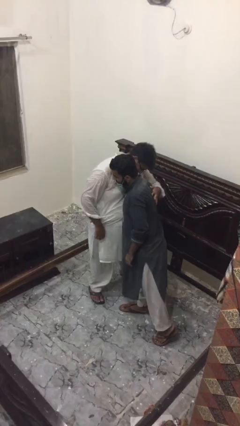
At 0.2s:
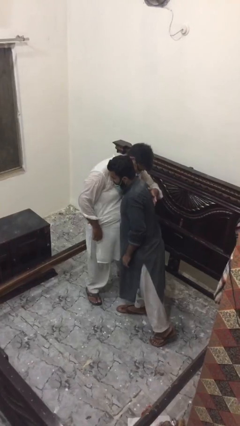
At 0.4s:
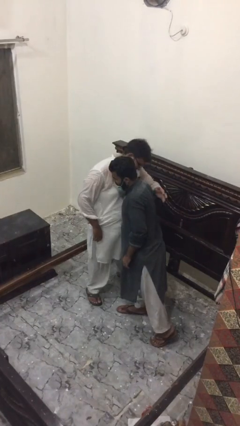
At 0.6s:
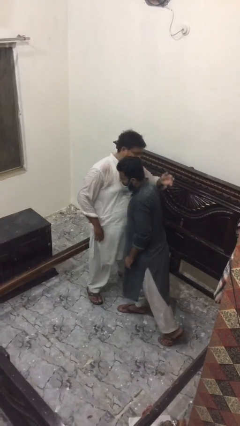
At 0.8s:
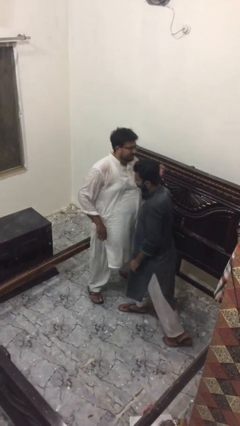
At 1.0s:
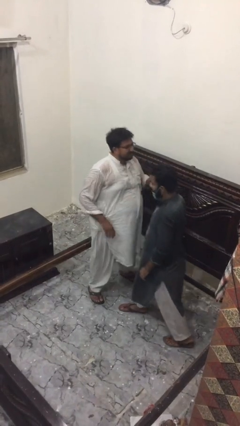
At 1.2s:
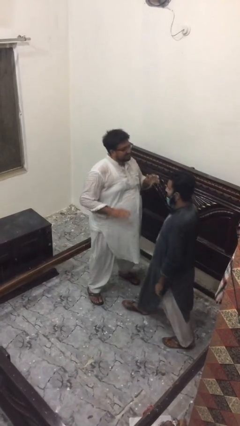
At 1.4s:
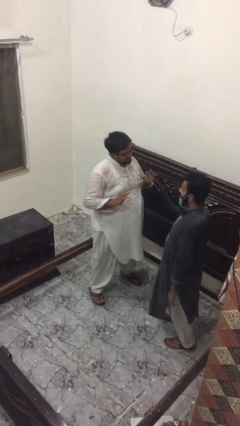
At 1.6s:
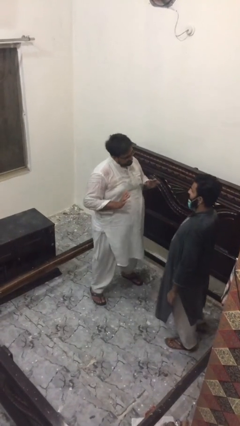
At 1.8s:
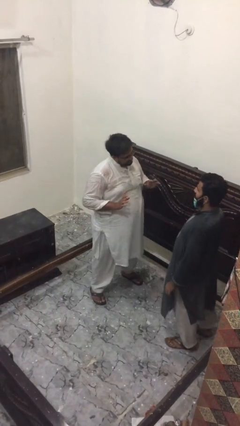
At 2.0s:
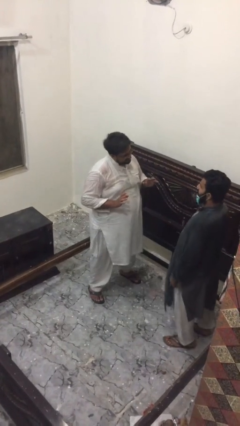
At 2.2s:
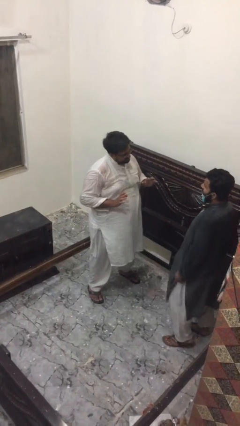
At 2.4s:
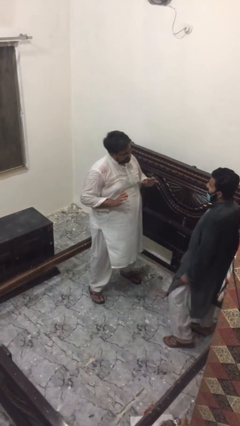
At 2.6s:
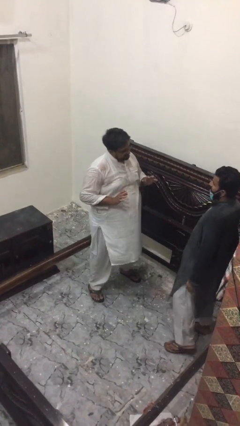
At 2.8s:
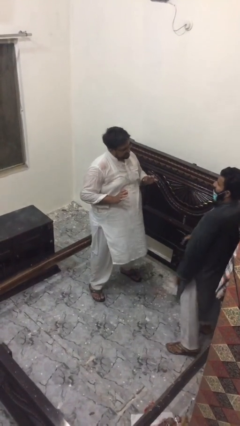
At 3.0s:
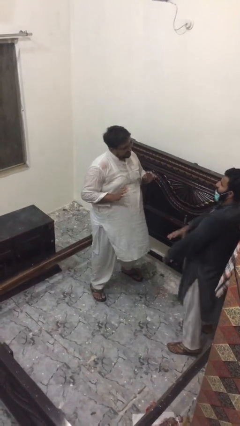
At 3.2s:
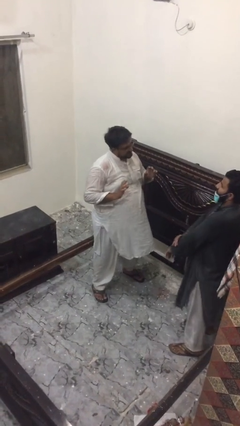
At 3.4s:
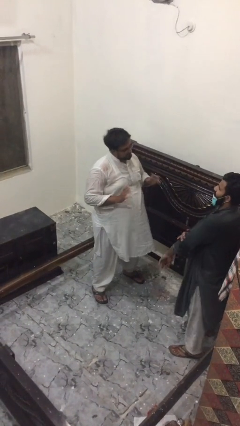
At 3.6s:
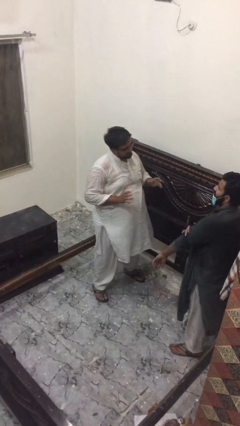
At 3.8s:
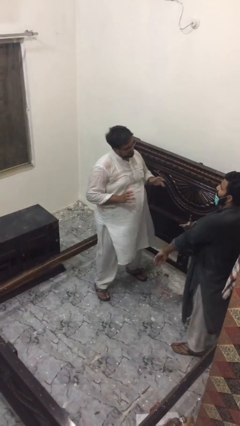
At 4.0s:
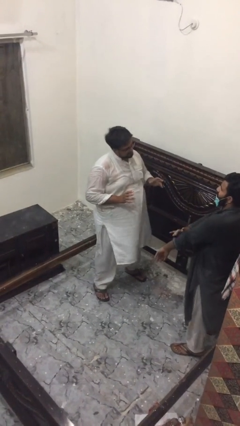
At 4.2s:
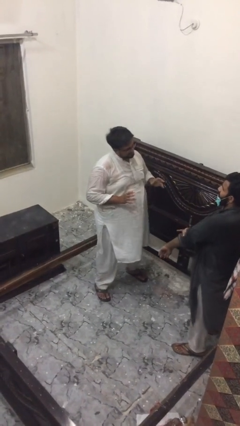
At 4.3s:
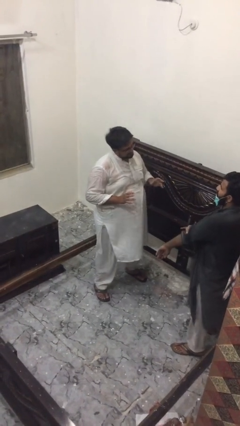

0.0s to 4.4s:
person talks to person

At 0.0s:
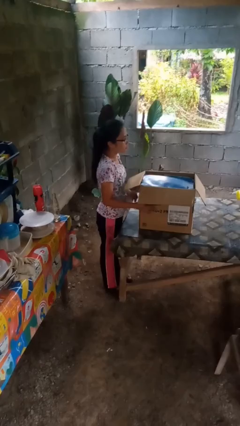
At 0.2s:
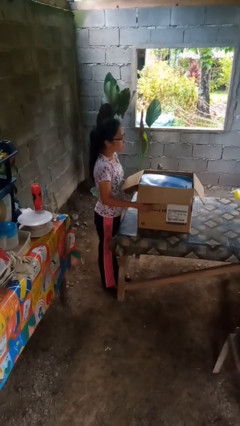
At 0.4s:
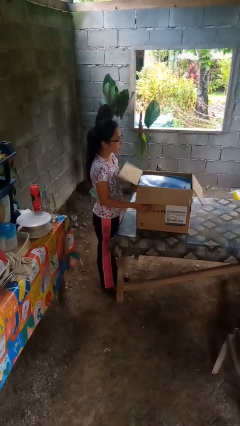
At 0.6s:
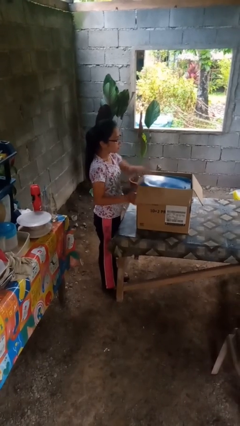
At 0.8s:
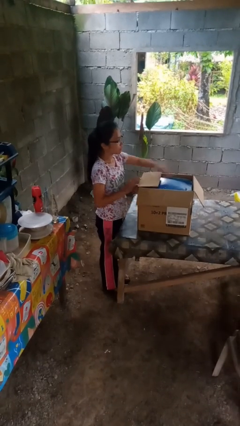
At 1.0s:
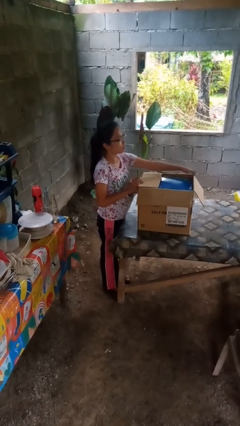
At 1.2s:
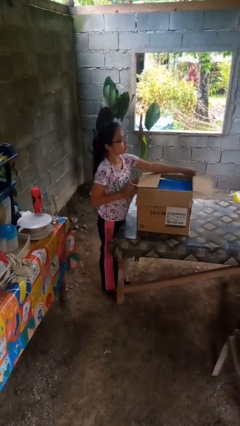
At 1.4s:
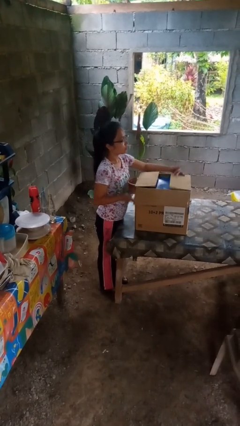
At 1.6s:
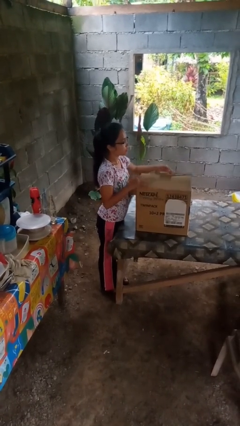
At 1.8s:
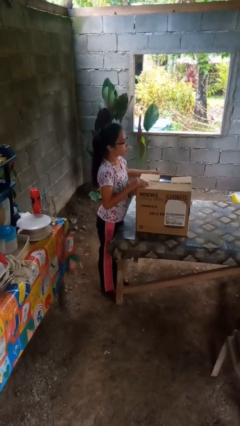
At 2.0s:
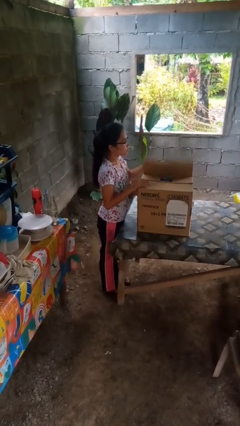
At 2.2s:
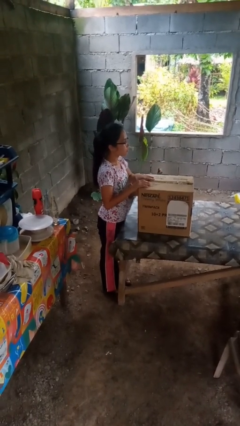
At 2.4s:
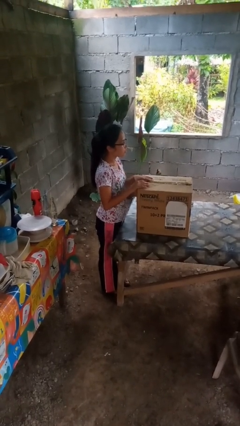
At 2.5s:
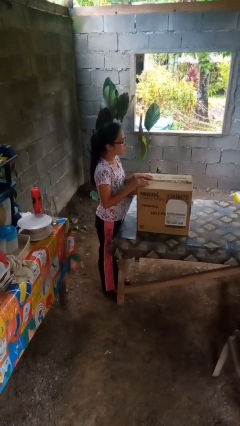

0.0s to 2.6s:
person closes box

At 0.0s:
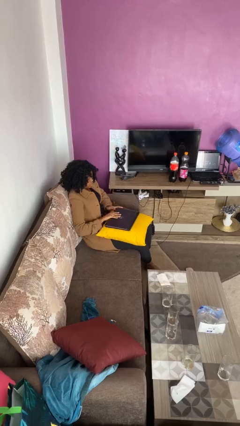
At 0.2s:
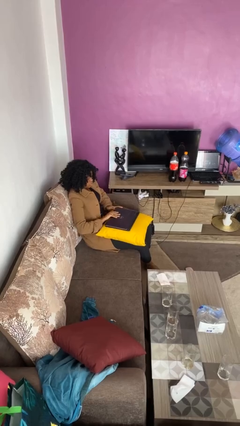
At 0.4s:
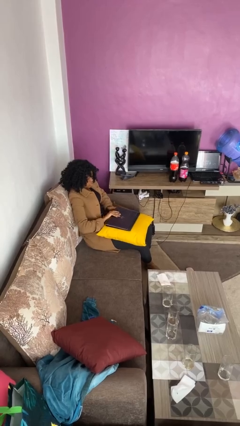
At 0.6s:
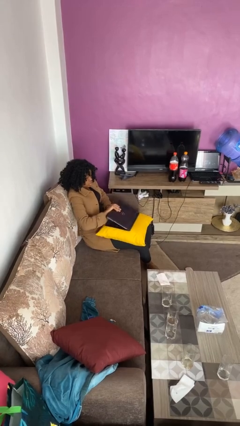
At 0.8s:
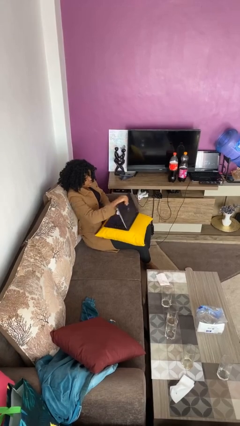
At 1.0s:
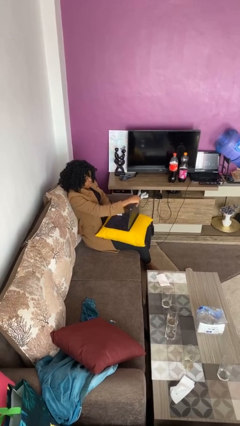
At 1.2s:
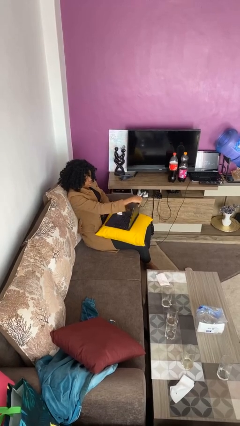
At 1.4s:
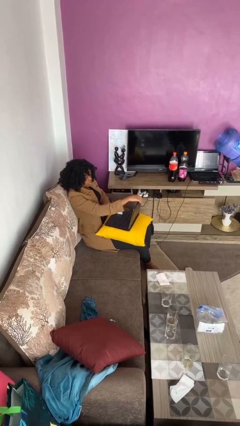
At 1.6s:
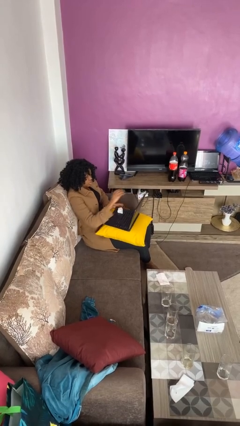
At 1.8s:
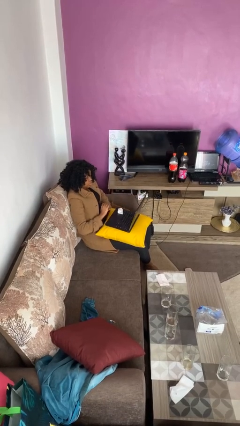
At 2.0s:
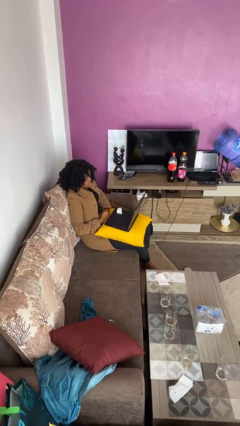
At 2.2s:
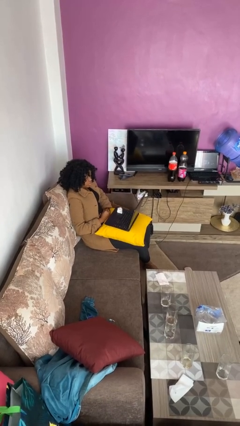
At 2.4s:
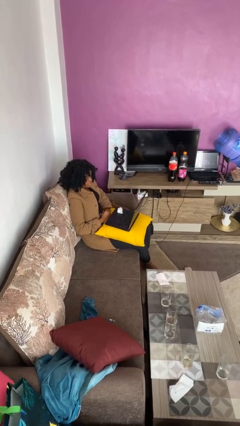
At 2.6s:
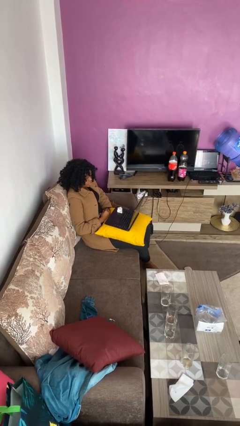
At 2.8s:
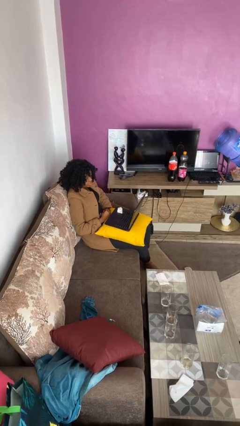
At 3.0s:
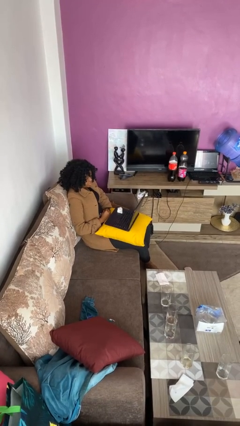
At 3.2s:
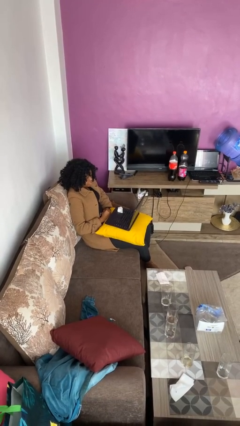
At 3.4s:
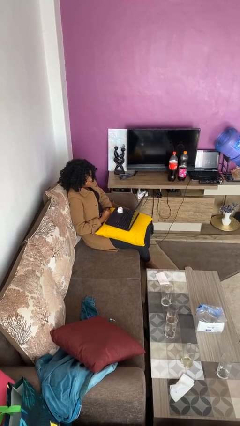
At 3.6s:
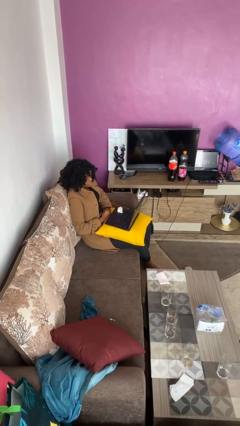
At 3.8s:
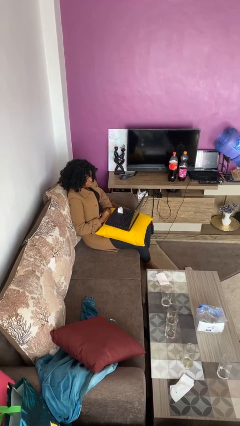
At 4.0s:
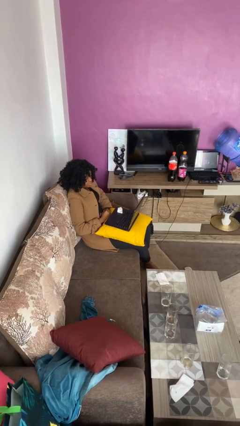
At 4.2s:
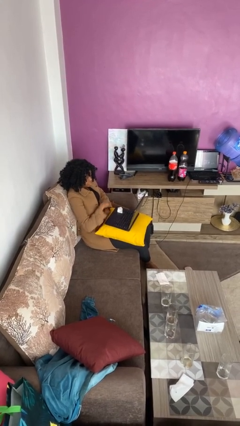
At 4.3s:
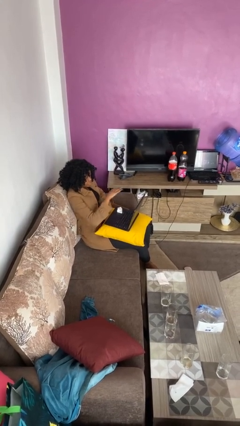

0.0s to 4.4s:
person opens laptop

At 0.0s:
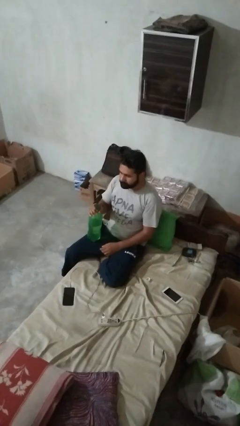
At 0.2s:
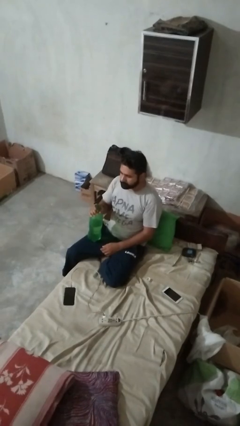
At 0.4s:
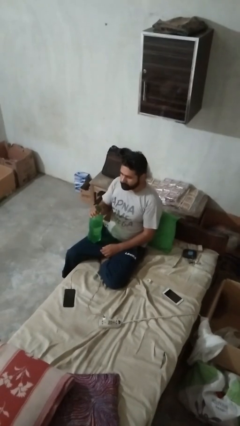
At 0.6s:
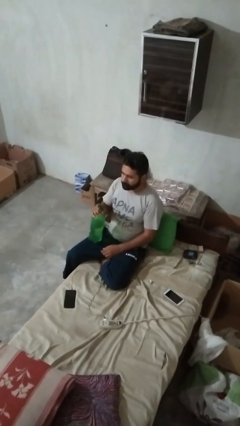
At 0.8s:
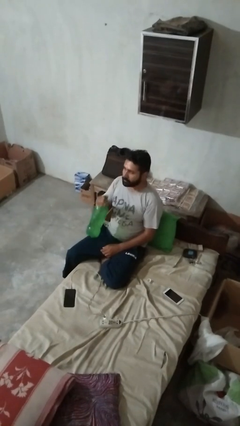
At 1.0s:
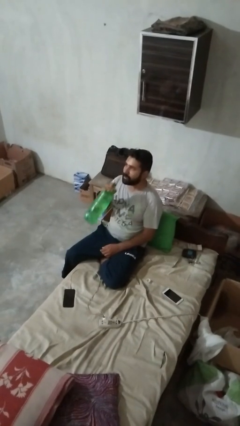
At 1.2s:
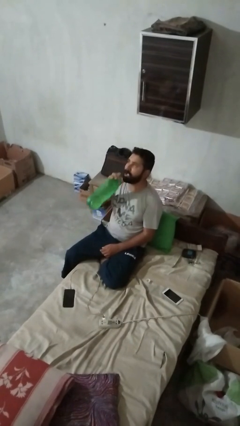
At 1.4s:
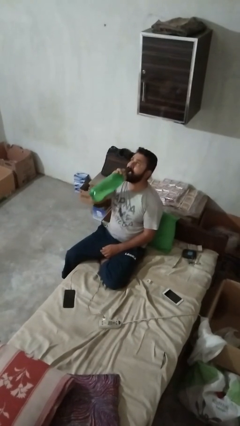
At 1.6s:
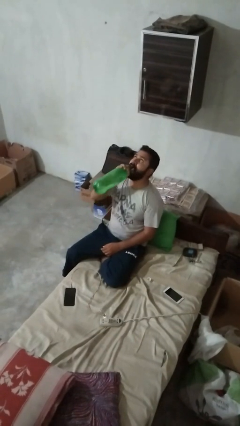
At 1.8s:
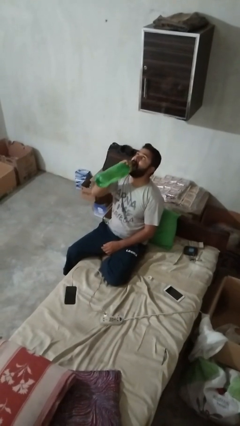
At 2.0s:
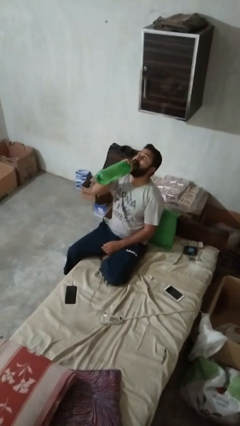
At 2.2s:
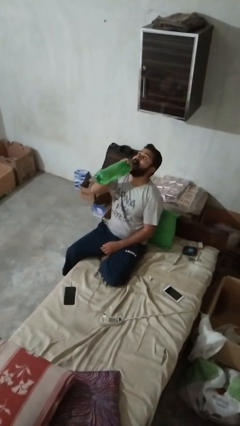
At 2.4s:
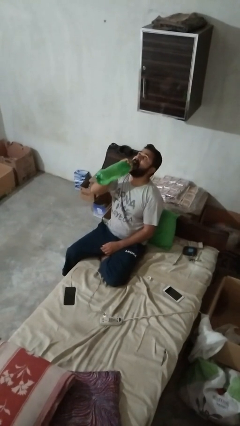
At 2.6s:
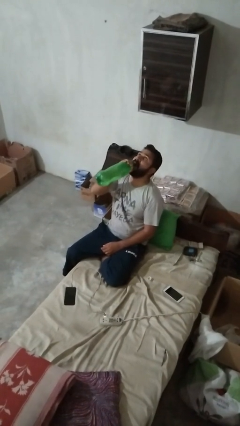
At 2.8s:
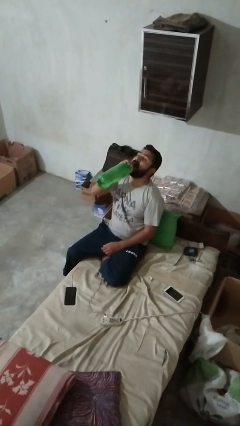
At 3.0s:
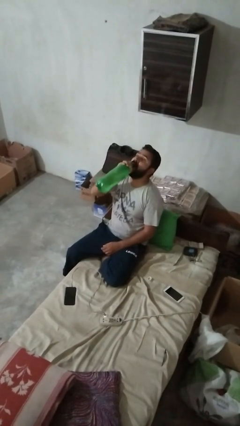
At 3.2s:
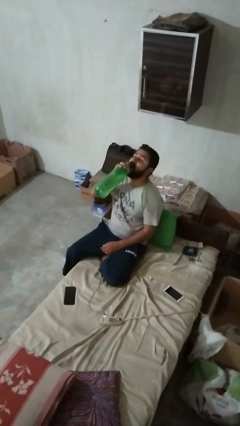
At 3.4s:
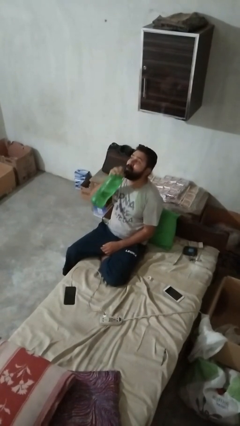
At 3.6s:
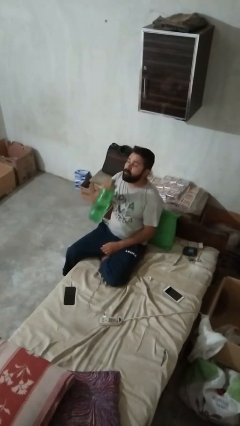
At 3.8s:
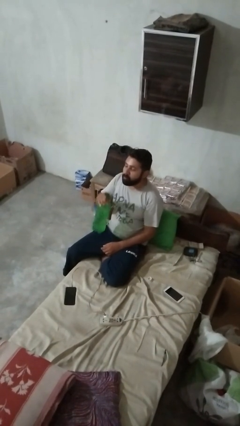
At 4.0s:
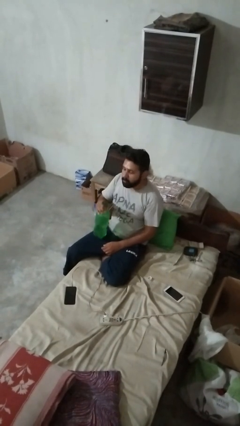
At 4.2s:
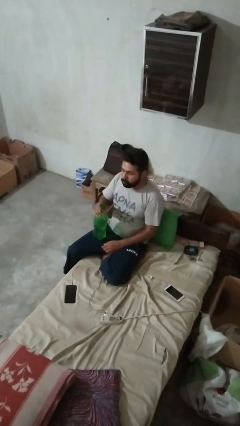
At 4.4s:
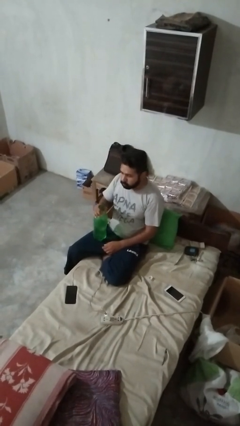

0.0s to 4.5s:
person drinks from bottle

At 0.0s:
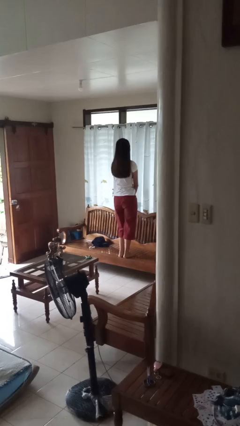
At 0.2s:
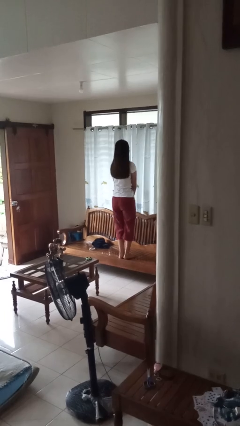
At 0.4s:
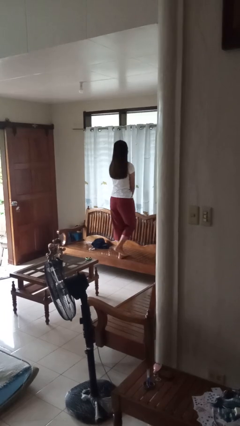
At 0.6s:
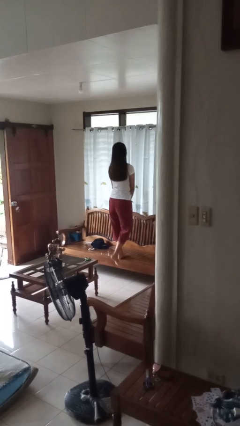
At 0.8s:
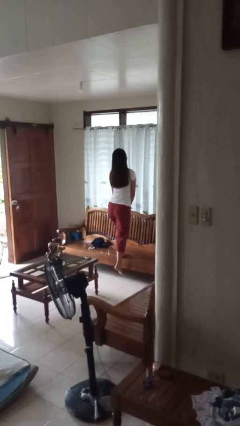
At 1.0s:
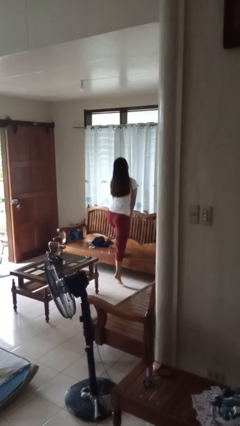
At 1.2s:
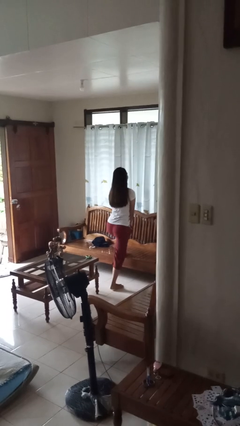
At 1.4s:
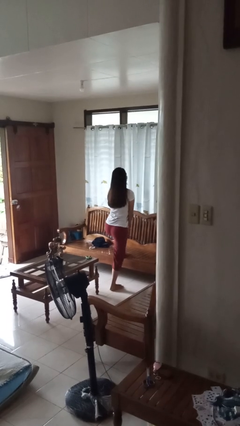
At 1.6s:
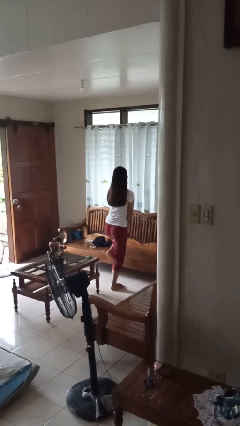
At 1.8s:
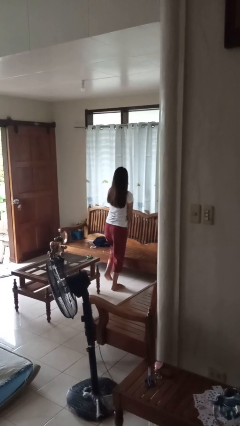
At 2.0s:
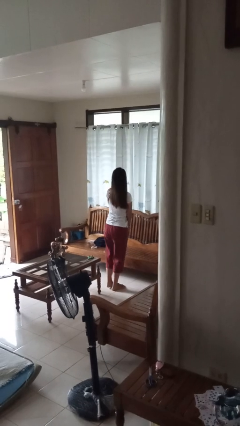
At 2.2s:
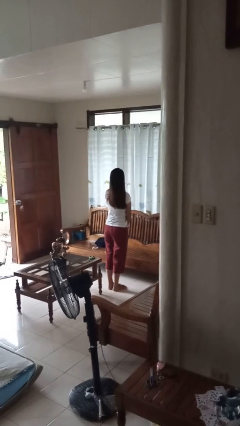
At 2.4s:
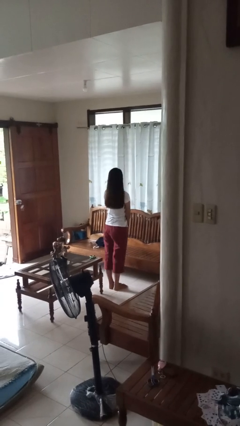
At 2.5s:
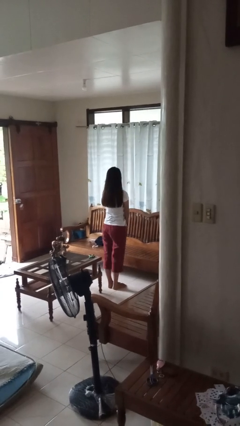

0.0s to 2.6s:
person climbs off chair
